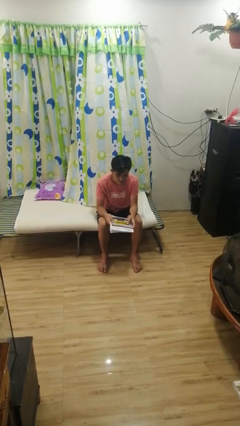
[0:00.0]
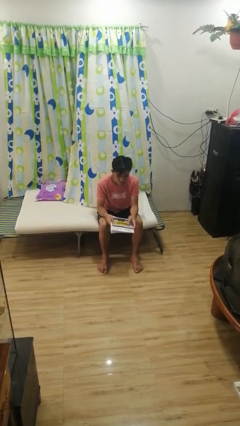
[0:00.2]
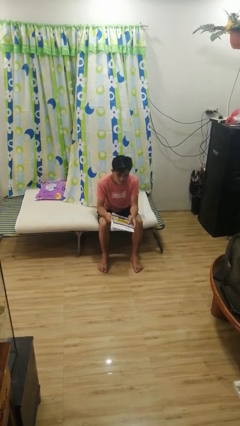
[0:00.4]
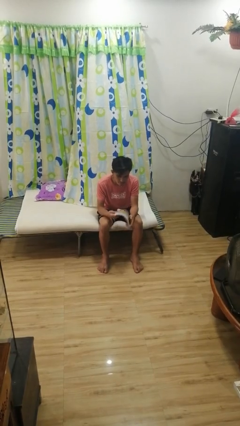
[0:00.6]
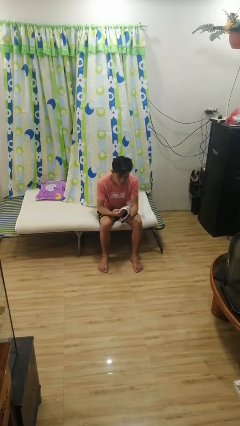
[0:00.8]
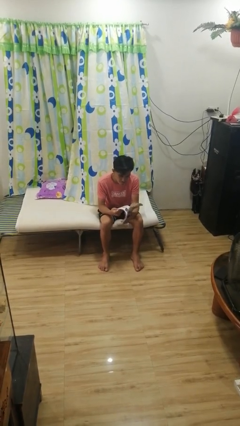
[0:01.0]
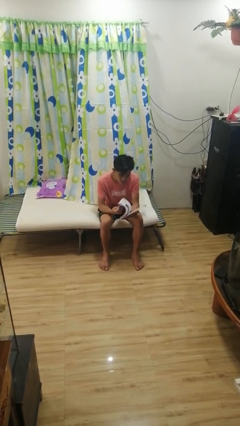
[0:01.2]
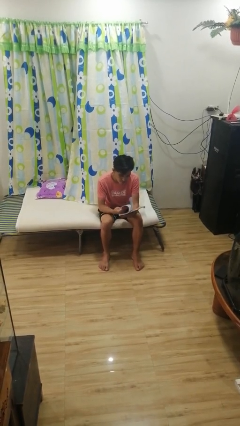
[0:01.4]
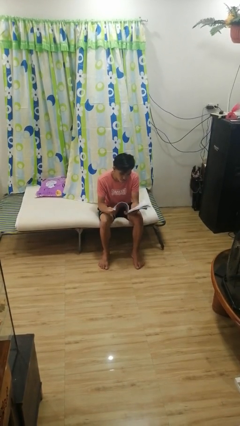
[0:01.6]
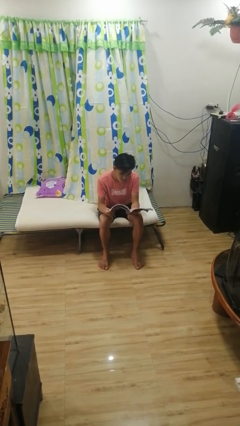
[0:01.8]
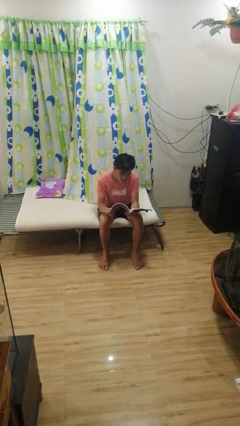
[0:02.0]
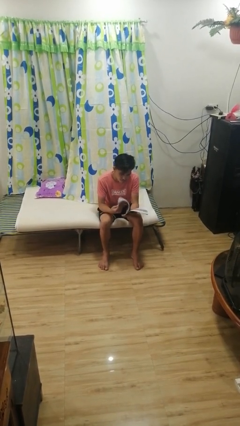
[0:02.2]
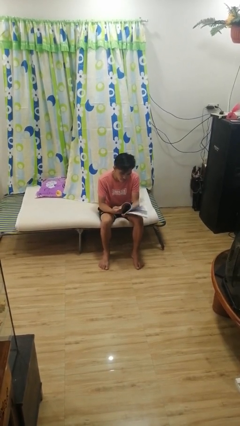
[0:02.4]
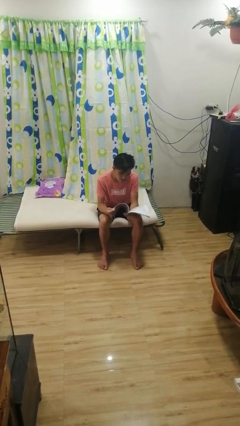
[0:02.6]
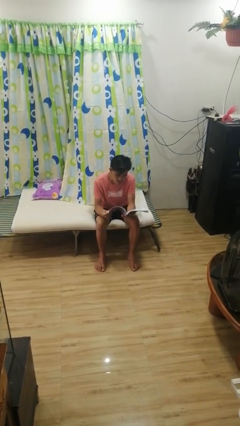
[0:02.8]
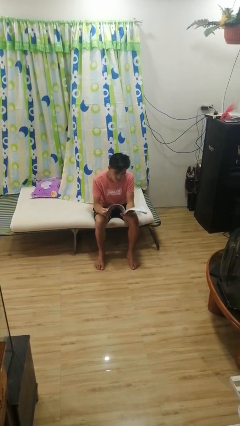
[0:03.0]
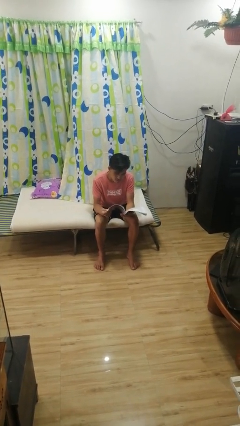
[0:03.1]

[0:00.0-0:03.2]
person reads magazine

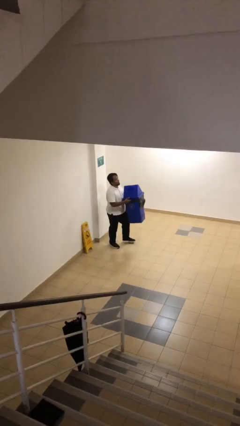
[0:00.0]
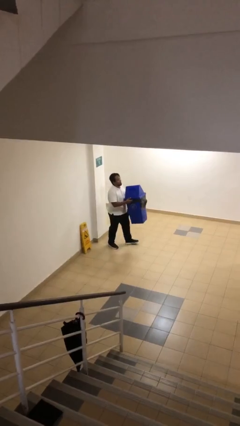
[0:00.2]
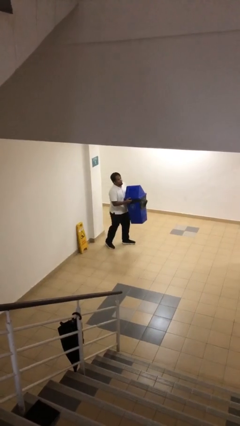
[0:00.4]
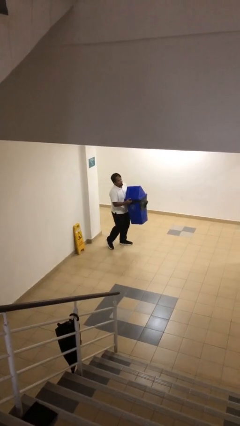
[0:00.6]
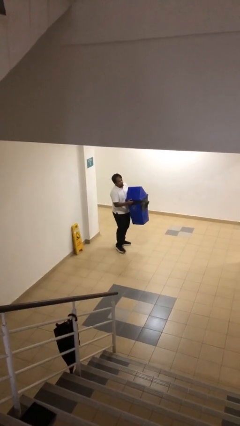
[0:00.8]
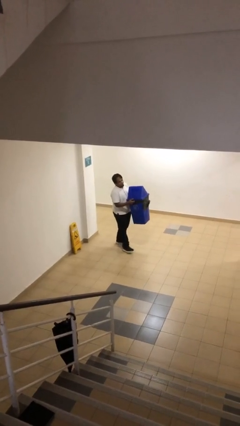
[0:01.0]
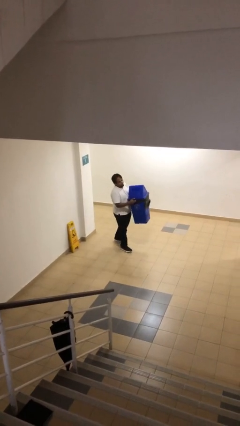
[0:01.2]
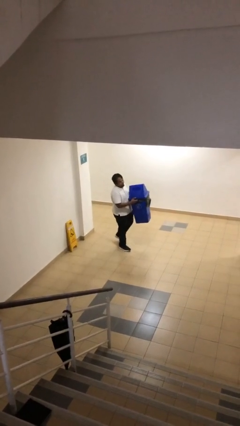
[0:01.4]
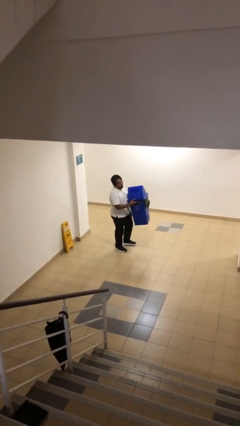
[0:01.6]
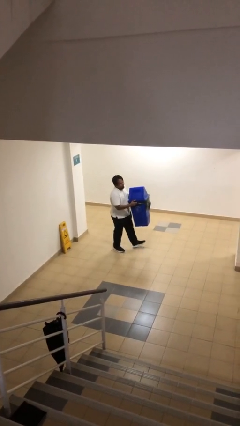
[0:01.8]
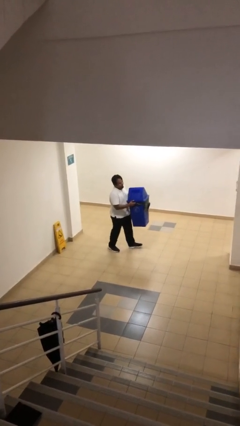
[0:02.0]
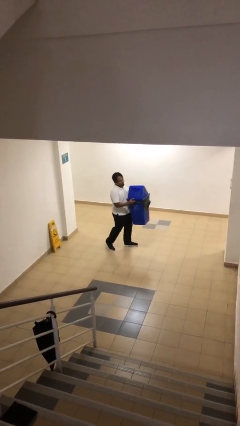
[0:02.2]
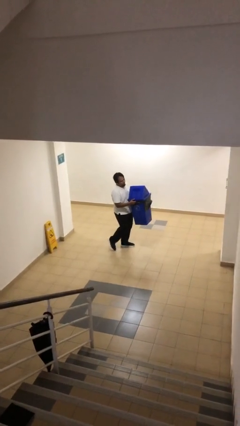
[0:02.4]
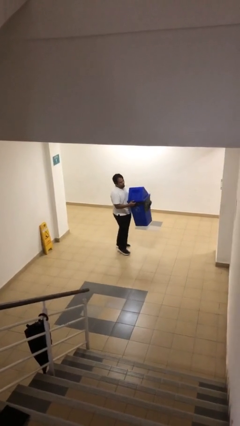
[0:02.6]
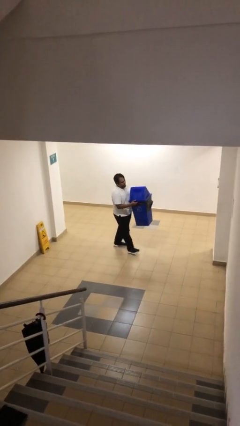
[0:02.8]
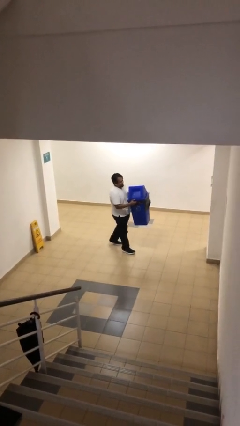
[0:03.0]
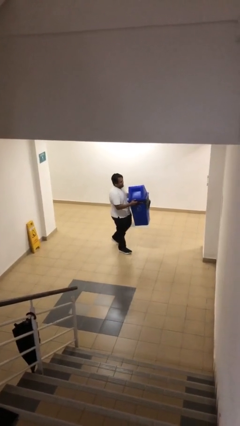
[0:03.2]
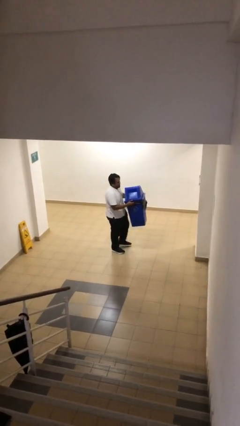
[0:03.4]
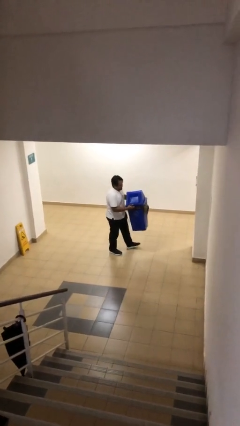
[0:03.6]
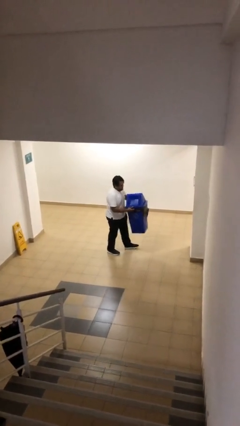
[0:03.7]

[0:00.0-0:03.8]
person carries heavy object

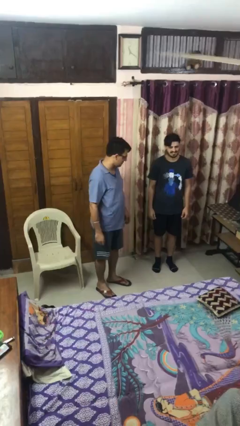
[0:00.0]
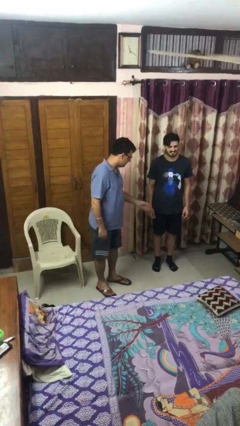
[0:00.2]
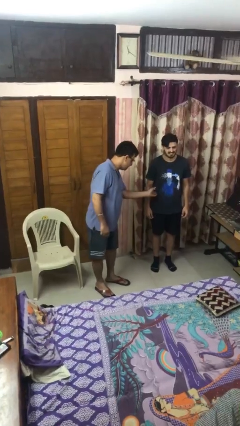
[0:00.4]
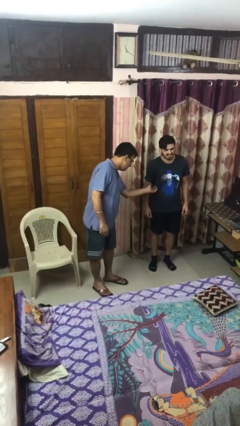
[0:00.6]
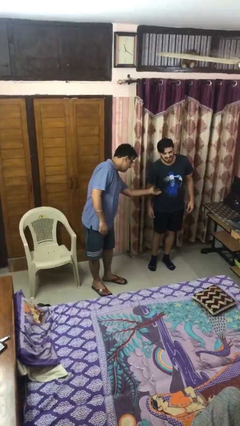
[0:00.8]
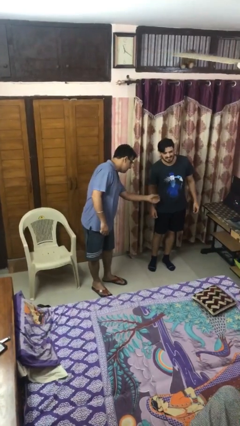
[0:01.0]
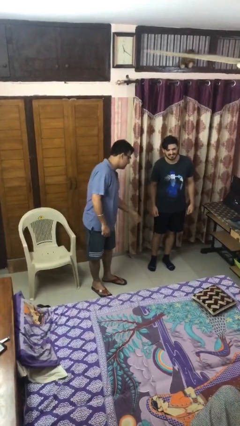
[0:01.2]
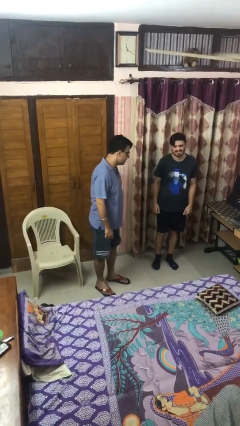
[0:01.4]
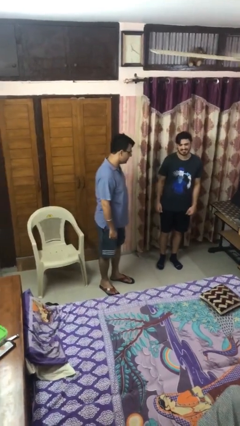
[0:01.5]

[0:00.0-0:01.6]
person tickles person

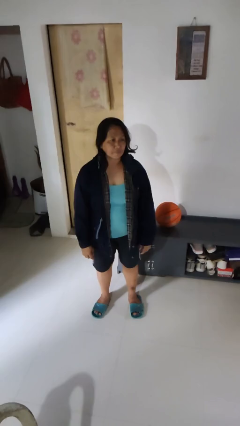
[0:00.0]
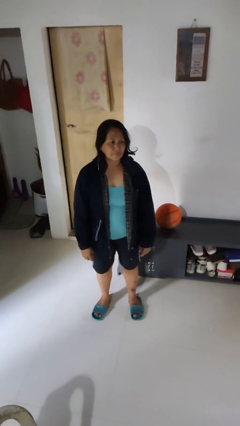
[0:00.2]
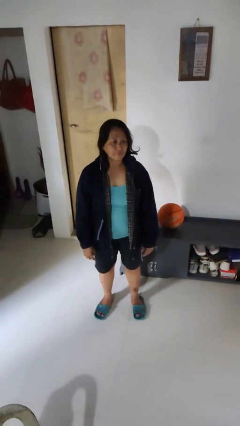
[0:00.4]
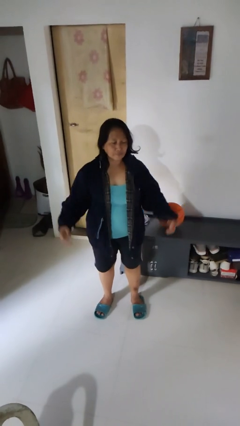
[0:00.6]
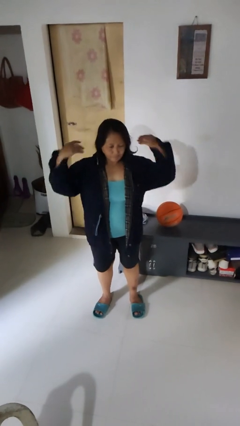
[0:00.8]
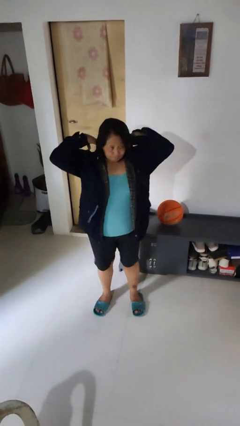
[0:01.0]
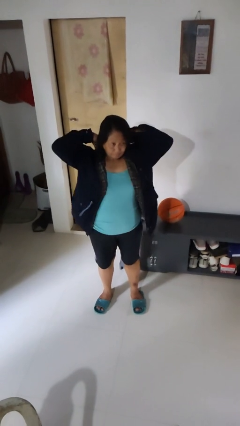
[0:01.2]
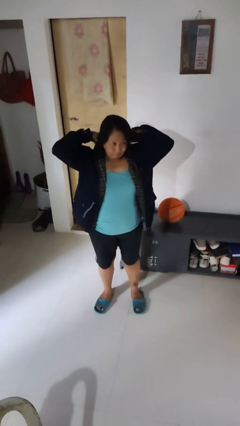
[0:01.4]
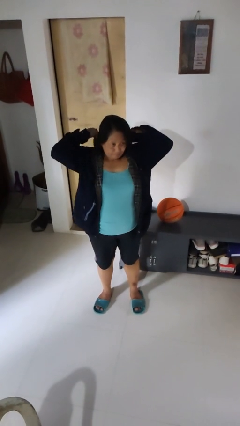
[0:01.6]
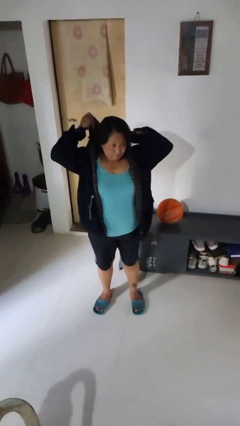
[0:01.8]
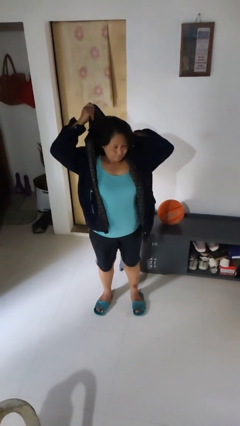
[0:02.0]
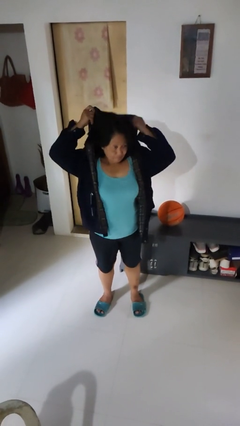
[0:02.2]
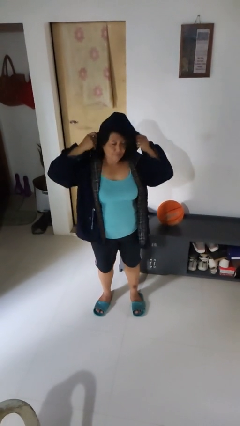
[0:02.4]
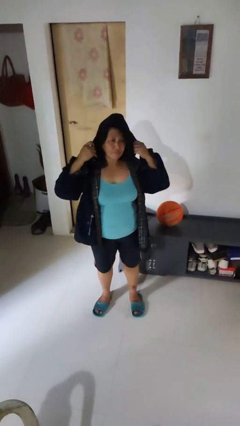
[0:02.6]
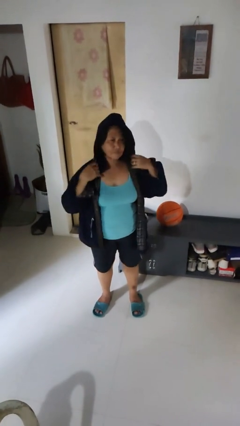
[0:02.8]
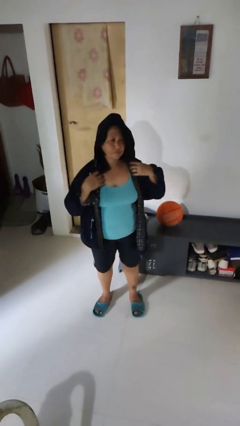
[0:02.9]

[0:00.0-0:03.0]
person puts on hoodie

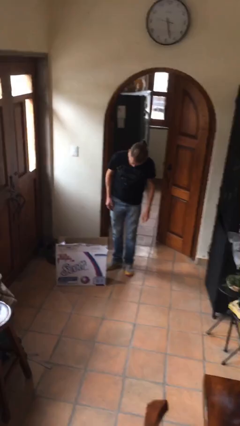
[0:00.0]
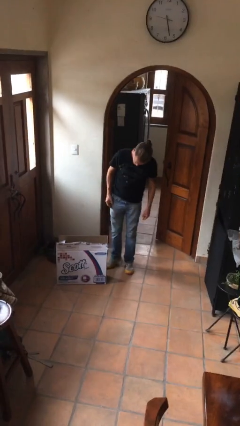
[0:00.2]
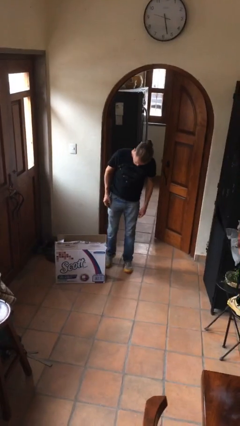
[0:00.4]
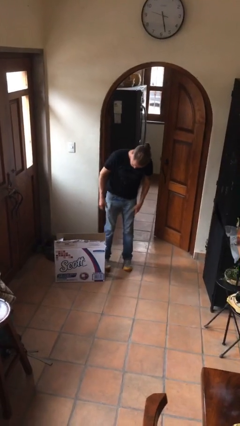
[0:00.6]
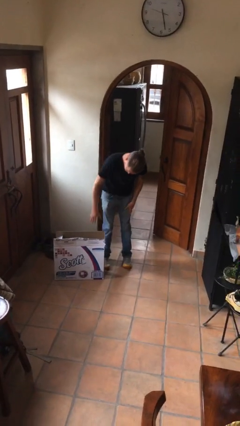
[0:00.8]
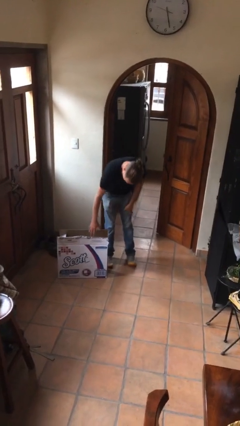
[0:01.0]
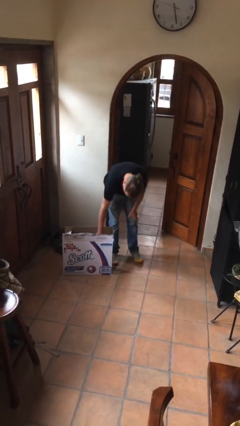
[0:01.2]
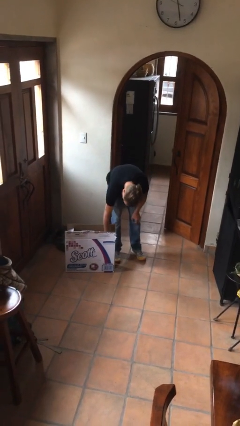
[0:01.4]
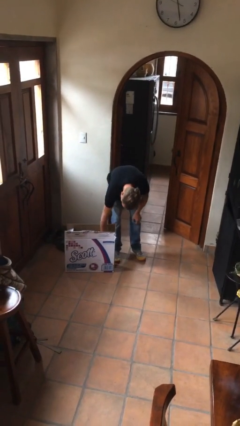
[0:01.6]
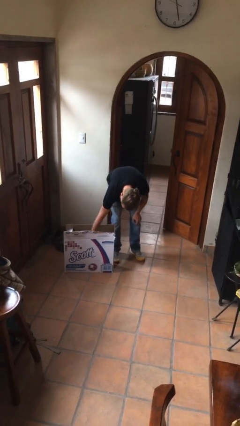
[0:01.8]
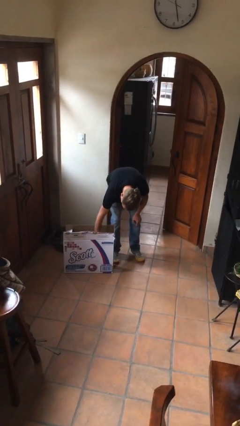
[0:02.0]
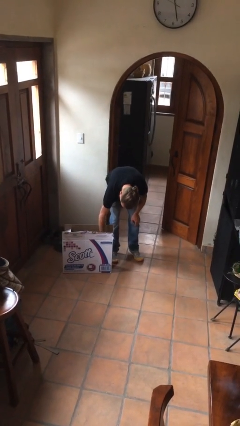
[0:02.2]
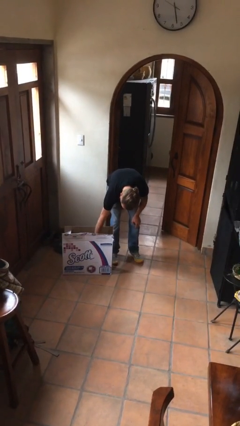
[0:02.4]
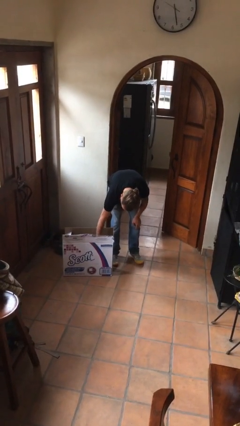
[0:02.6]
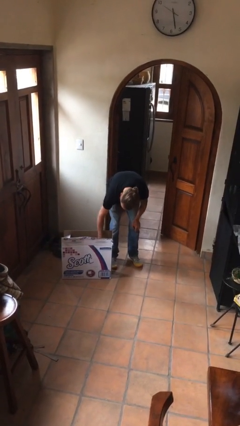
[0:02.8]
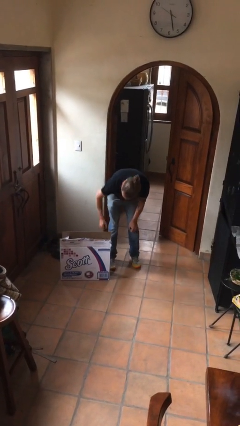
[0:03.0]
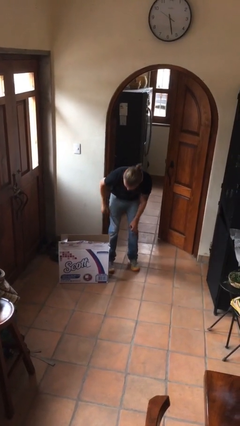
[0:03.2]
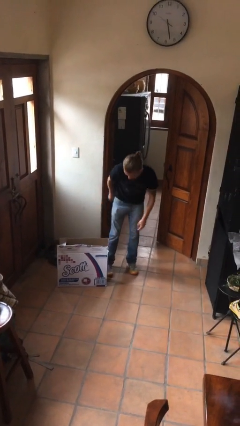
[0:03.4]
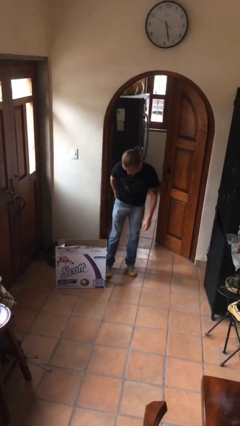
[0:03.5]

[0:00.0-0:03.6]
person searches in box

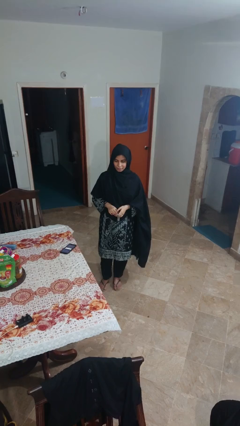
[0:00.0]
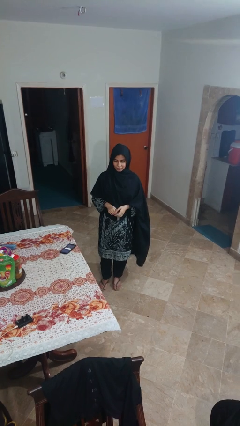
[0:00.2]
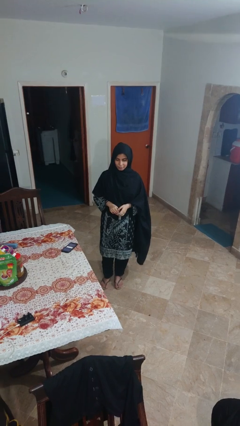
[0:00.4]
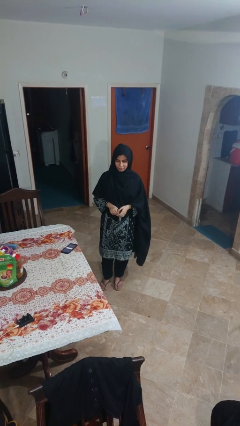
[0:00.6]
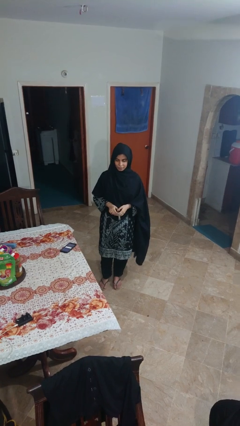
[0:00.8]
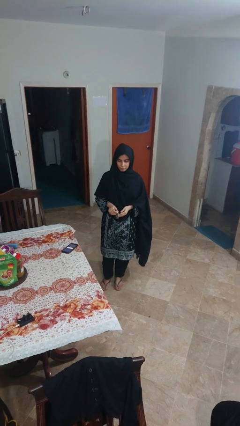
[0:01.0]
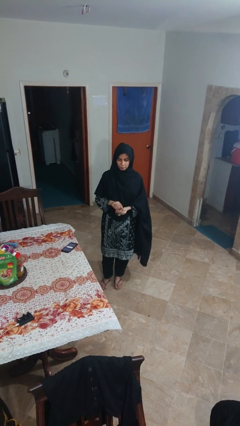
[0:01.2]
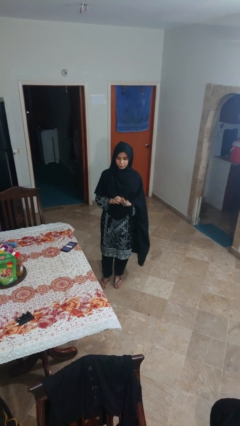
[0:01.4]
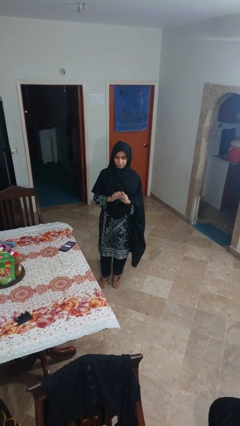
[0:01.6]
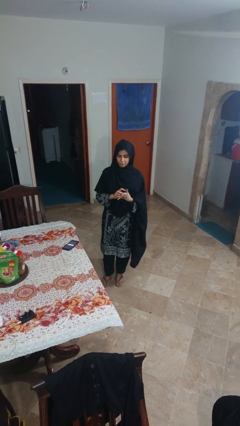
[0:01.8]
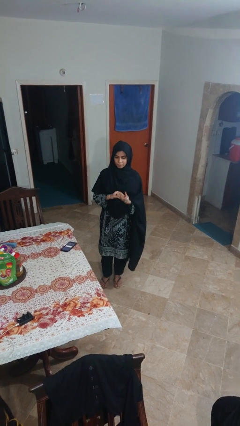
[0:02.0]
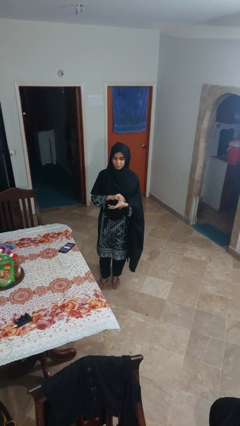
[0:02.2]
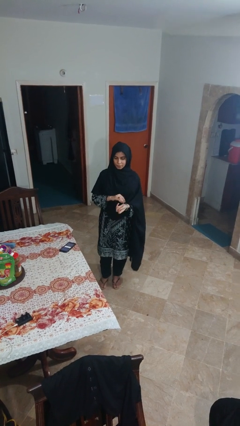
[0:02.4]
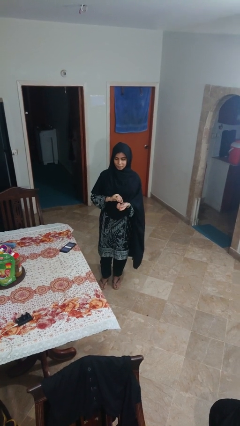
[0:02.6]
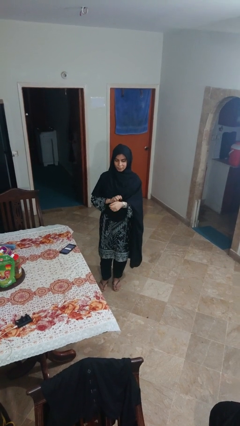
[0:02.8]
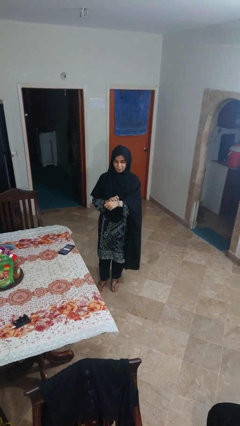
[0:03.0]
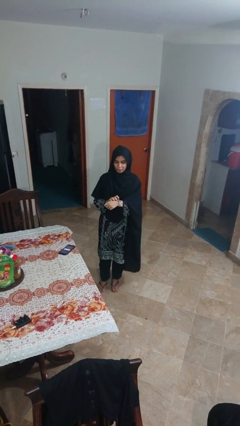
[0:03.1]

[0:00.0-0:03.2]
person puts on wristwatch
